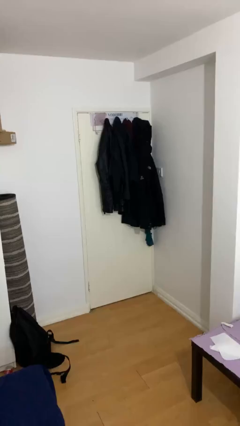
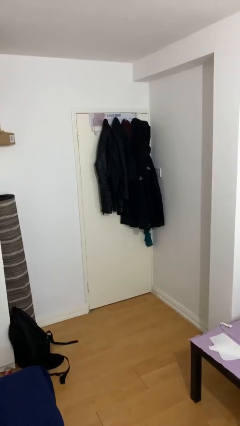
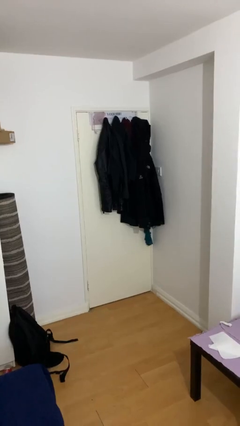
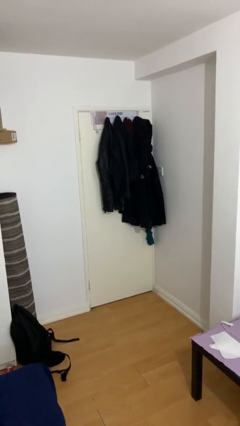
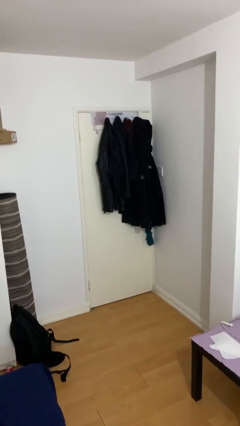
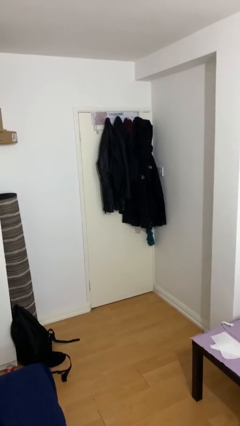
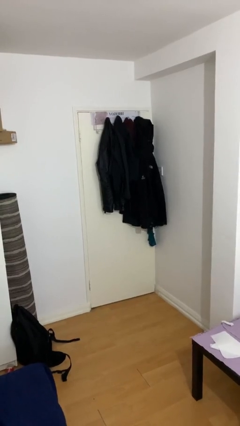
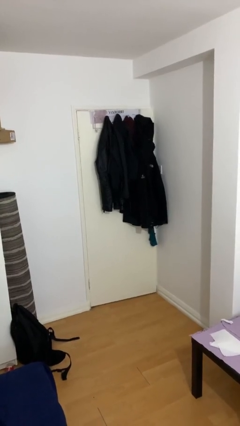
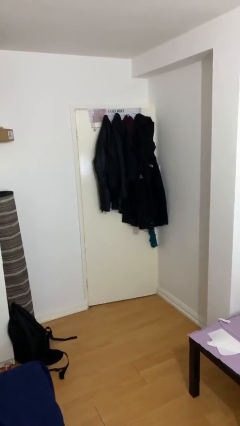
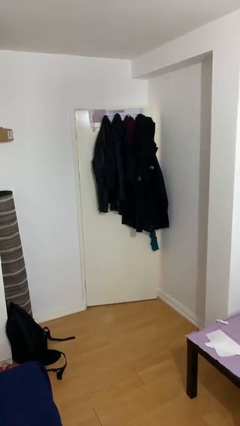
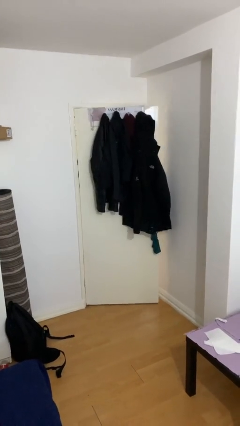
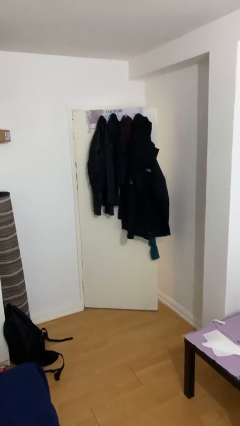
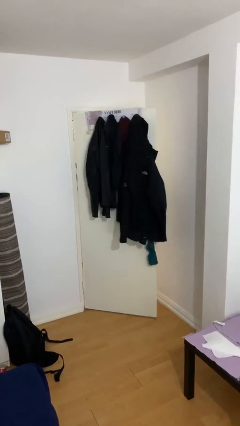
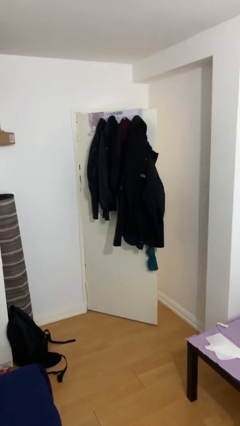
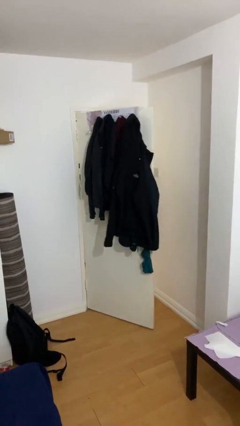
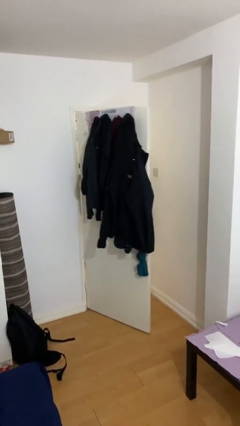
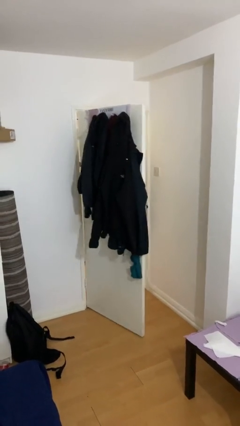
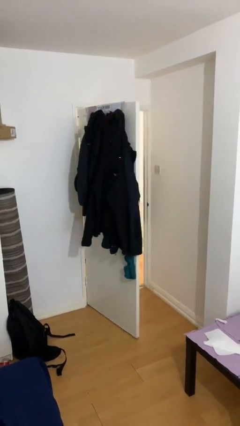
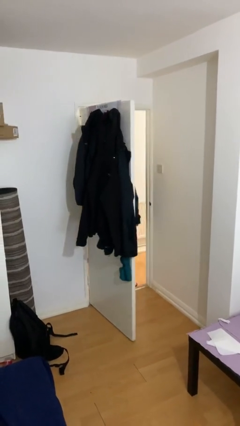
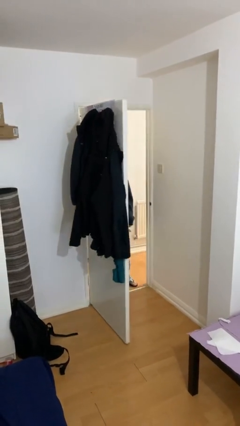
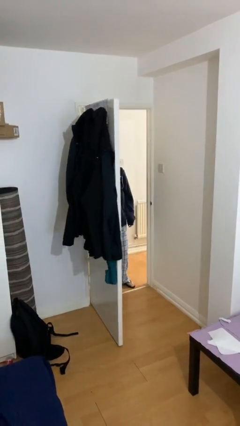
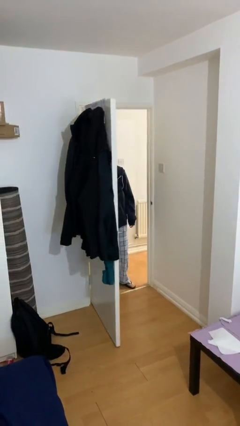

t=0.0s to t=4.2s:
person opens facility door

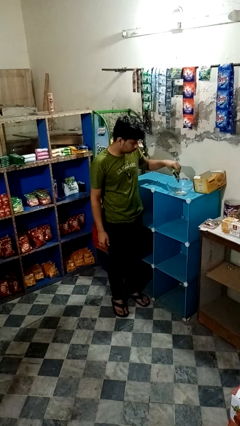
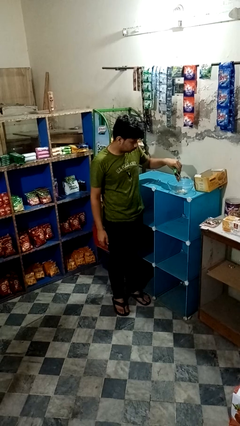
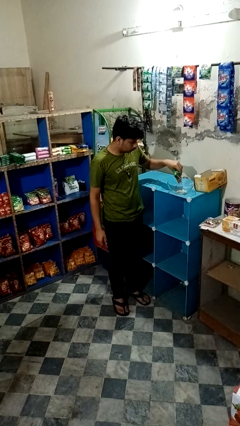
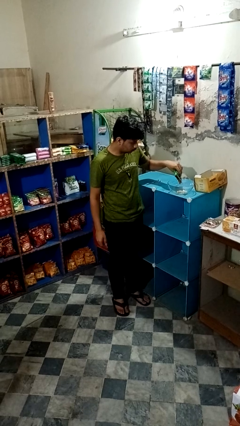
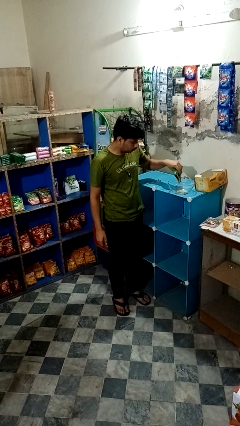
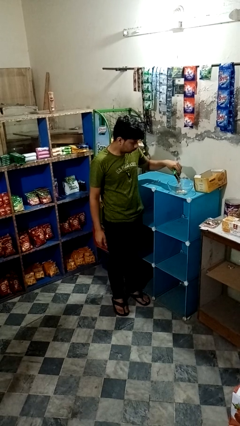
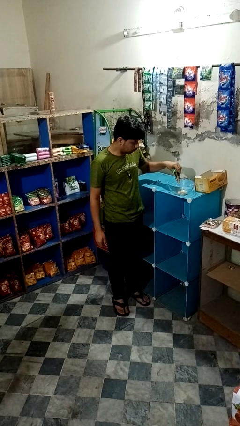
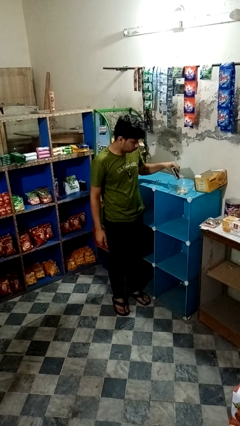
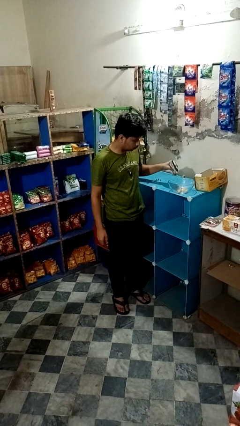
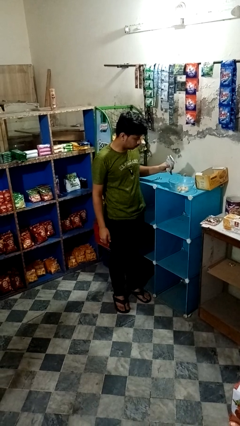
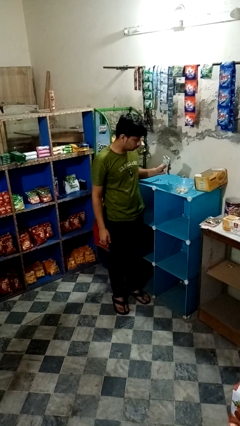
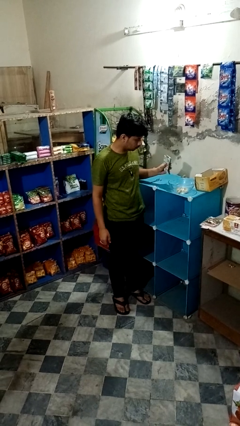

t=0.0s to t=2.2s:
person pours into bowl

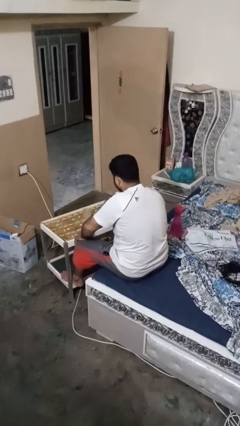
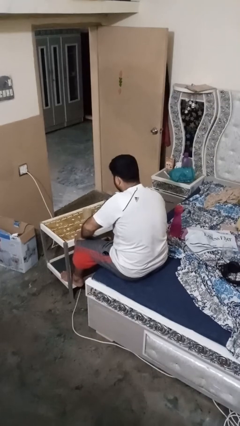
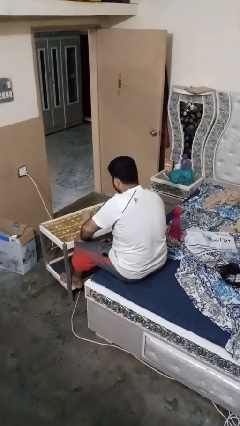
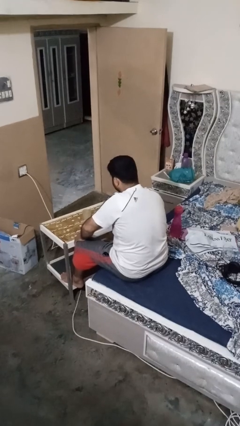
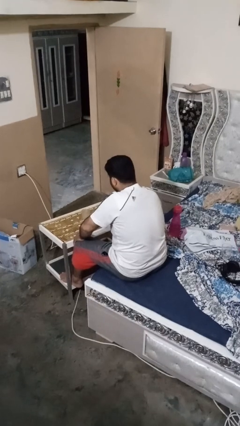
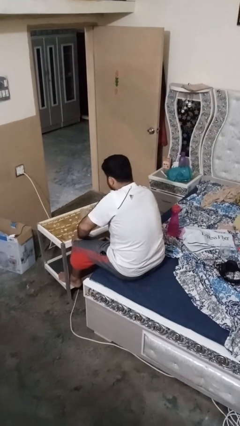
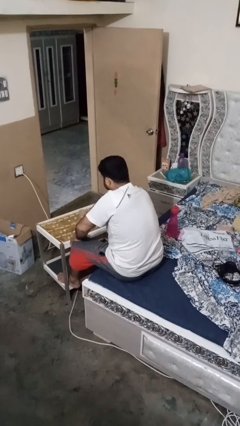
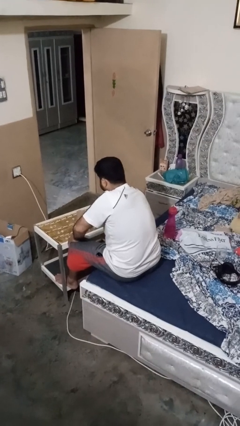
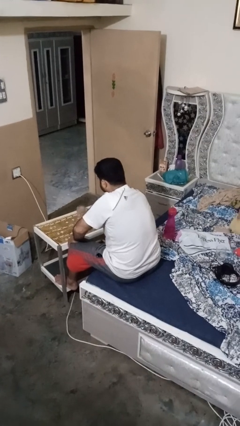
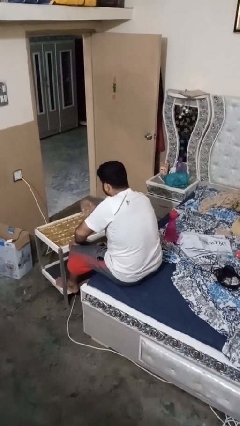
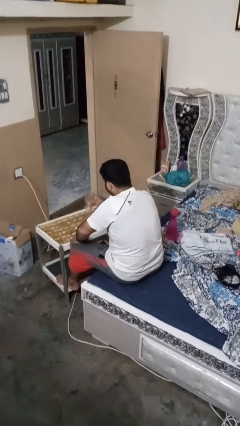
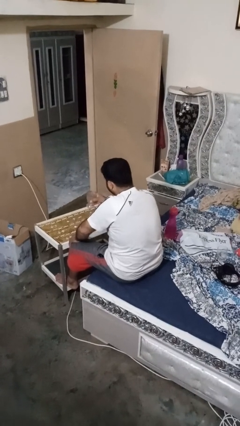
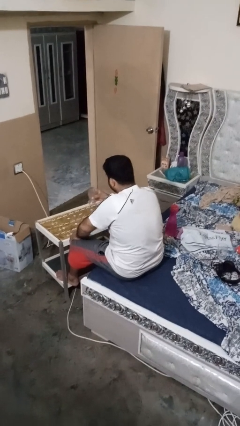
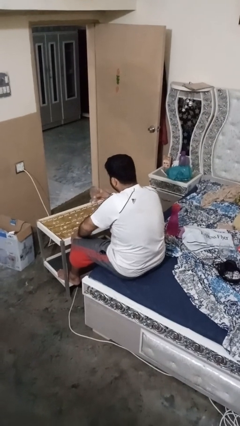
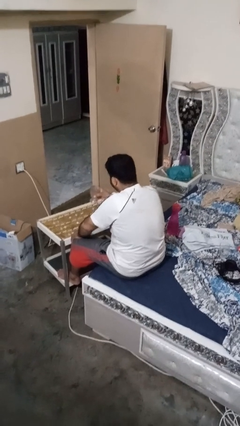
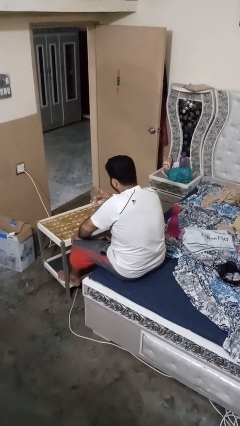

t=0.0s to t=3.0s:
person picks up object from table

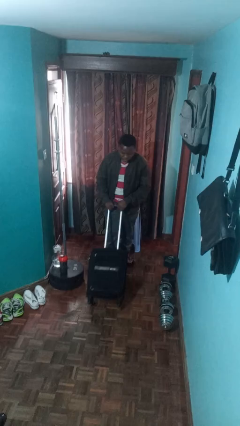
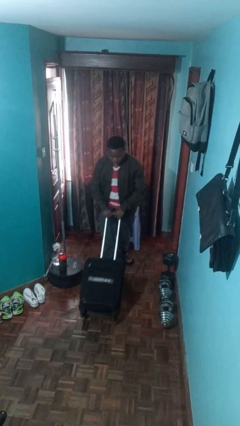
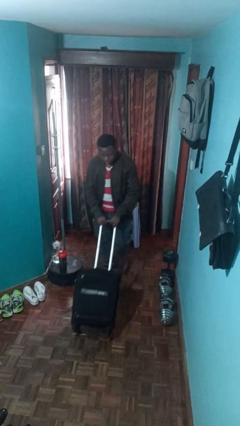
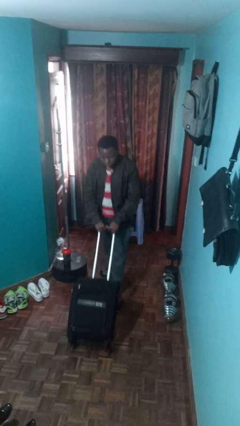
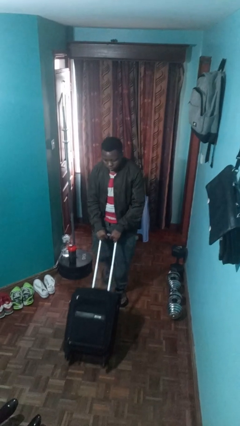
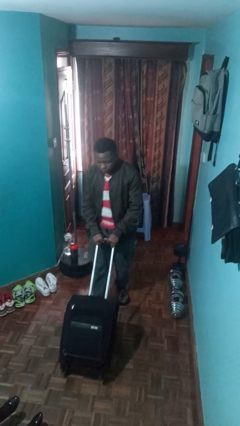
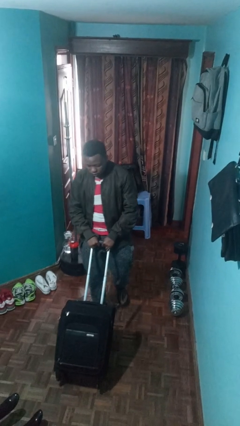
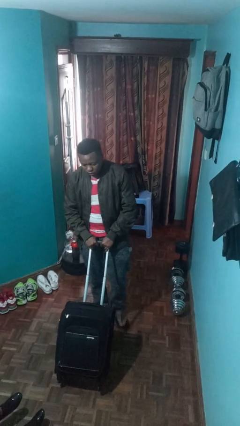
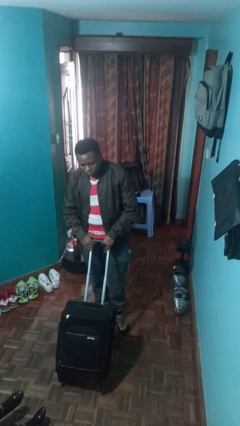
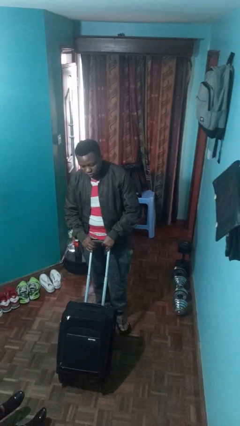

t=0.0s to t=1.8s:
person pushes wheeled cart

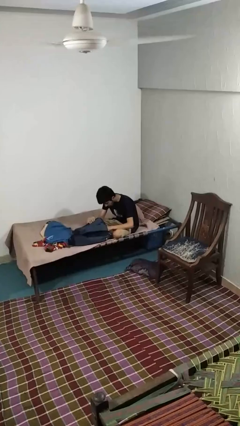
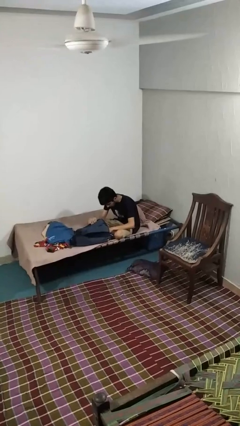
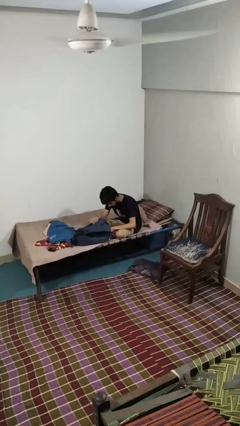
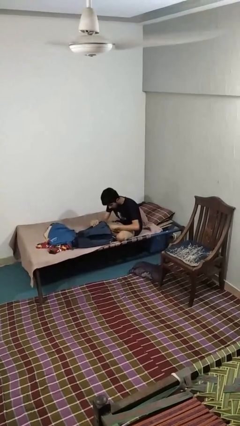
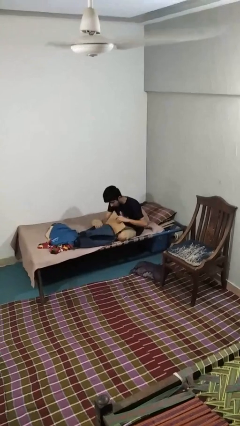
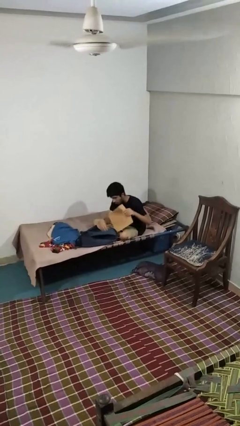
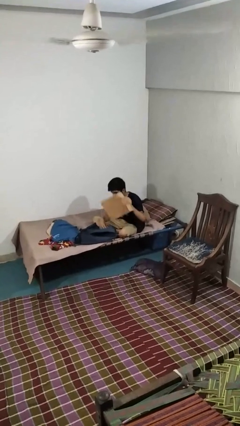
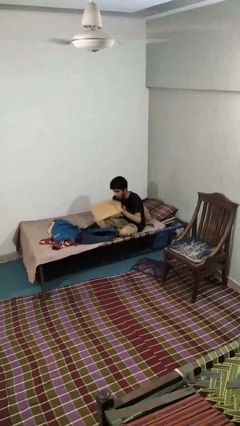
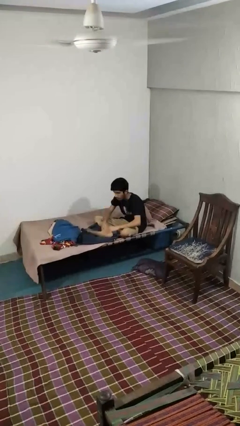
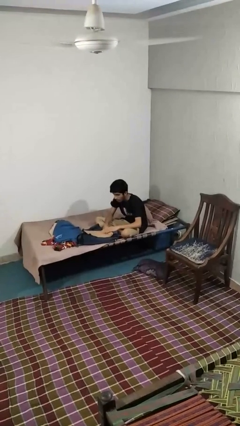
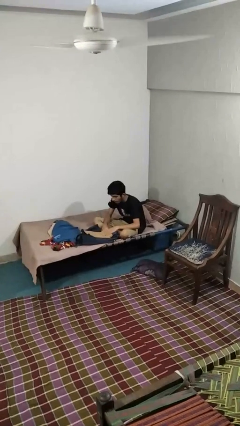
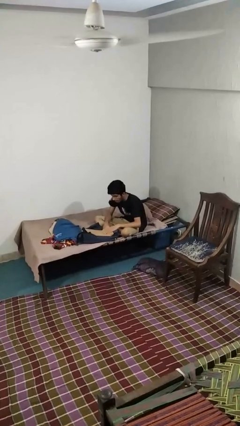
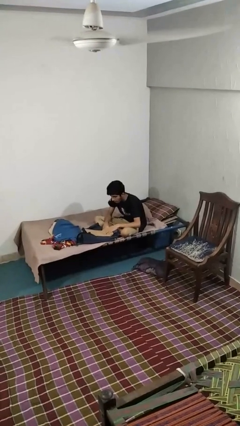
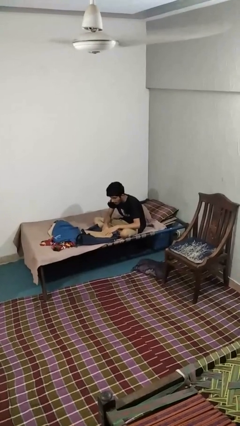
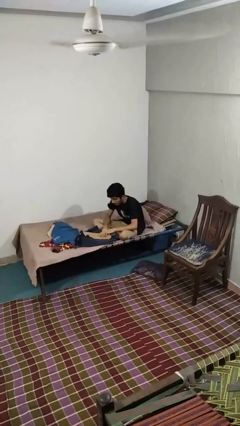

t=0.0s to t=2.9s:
person takes object from backpack

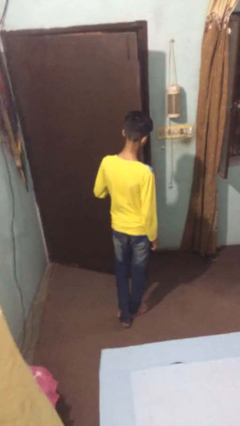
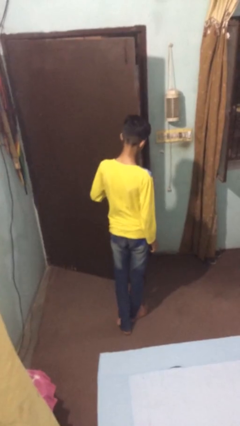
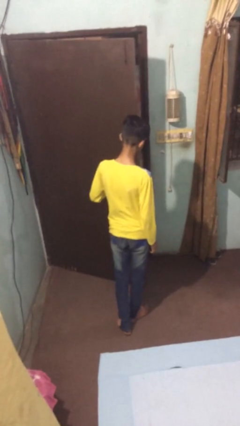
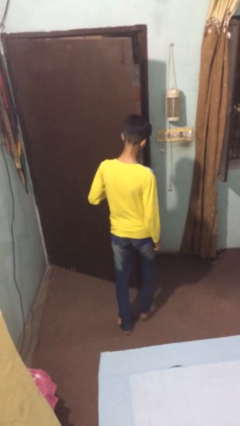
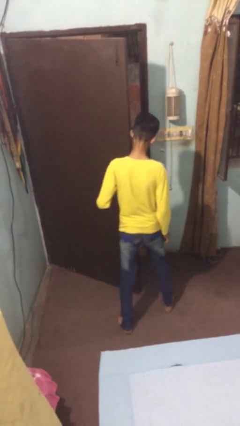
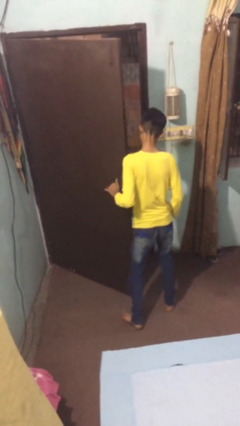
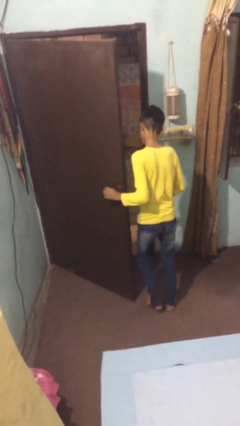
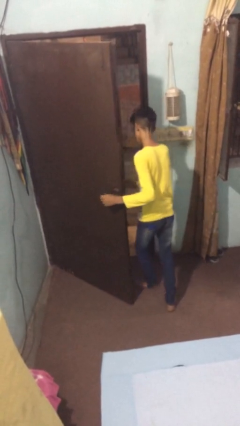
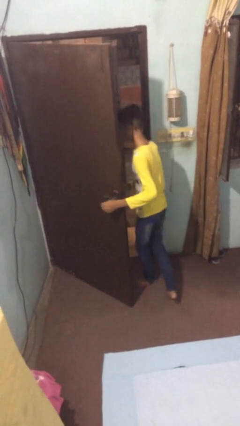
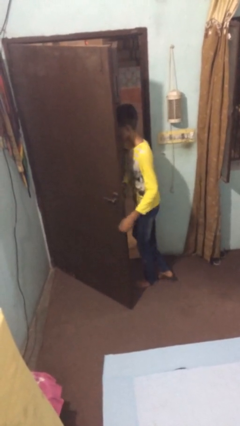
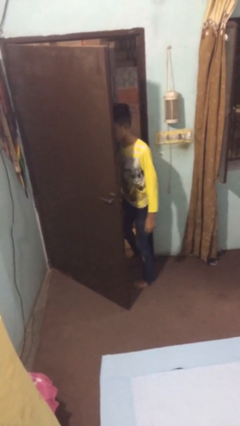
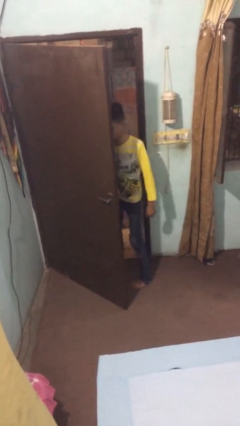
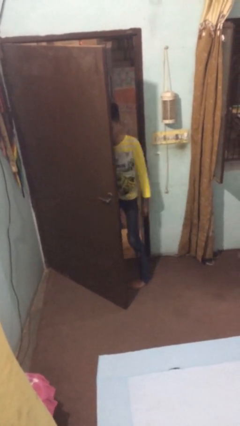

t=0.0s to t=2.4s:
person exits scene through structure

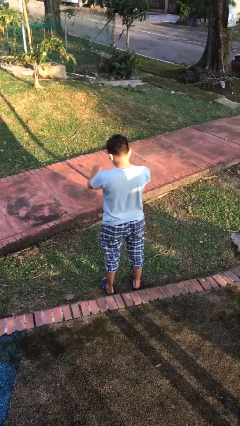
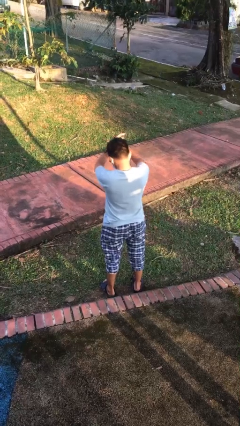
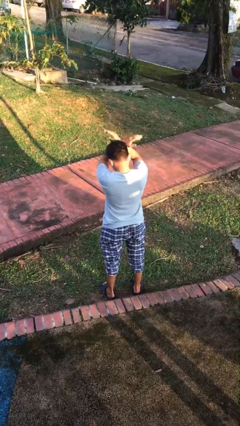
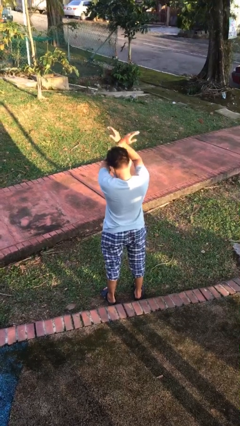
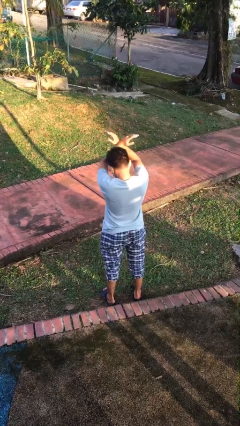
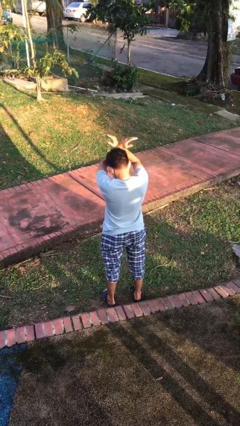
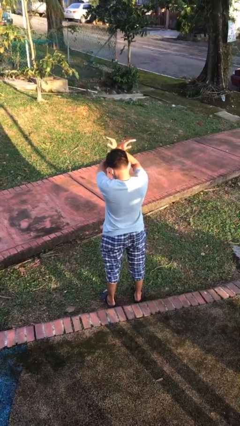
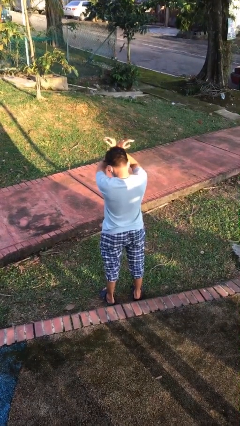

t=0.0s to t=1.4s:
person gestures arms x
